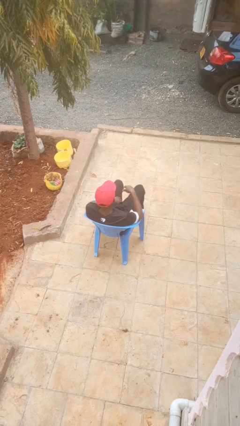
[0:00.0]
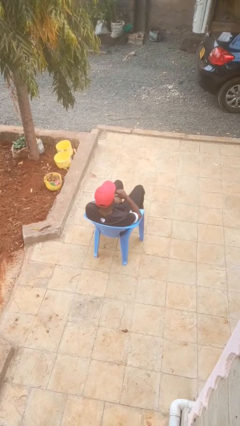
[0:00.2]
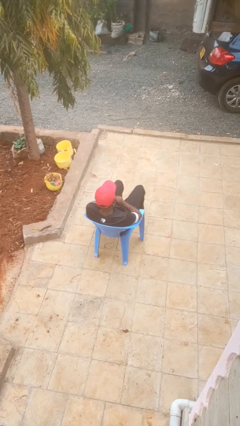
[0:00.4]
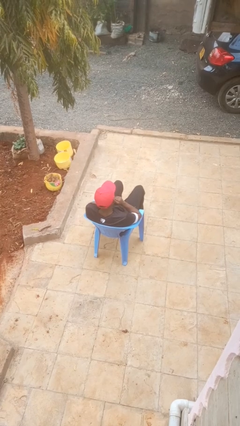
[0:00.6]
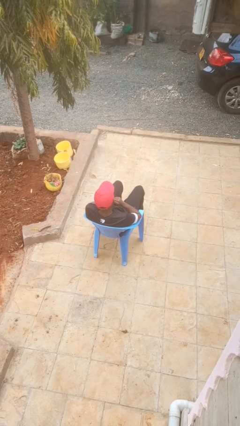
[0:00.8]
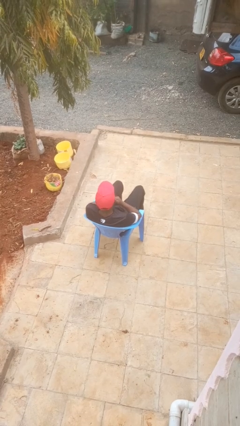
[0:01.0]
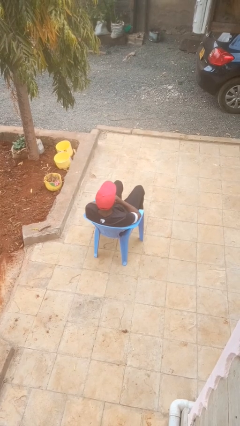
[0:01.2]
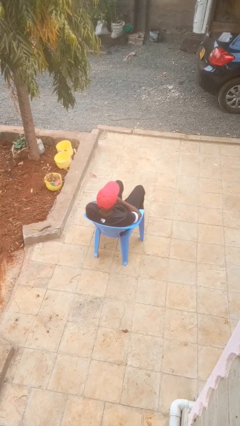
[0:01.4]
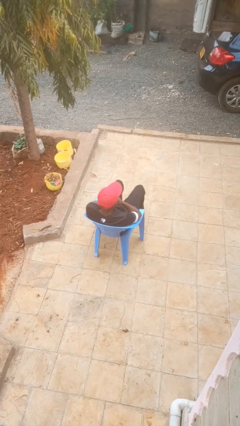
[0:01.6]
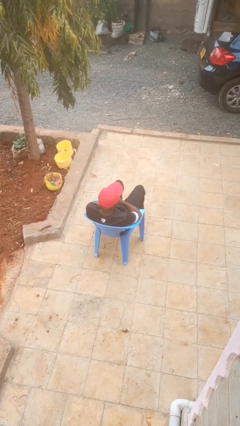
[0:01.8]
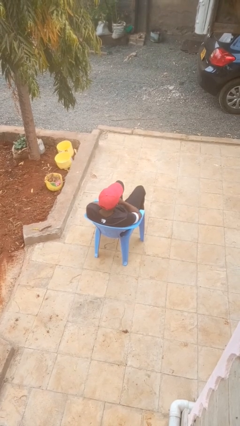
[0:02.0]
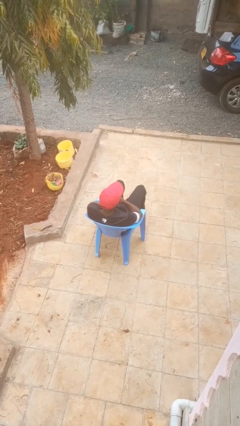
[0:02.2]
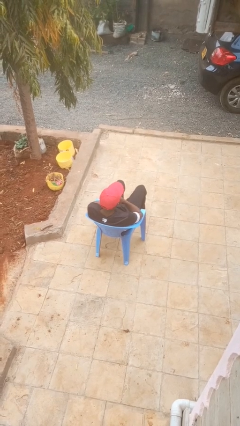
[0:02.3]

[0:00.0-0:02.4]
person strokes chin

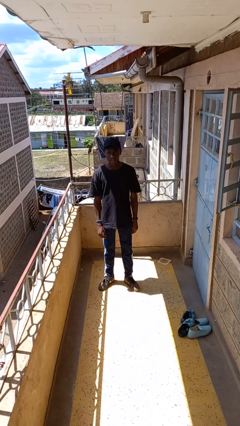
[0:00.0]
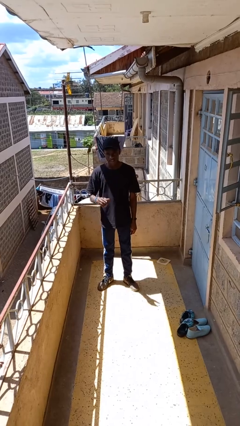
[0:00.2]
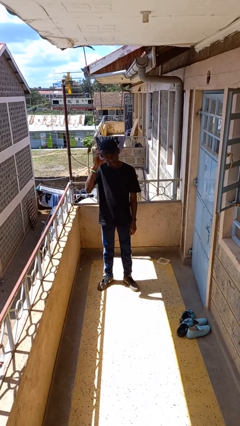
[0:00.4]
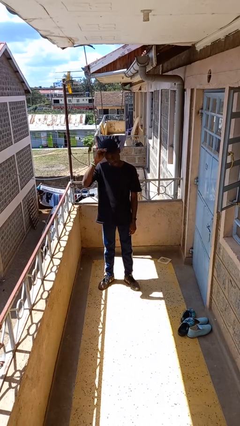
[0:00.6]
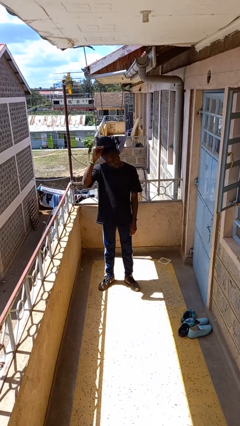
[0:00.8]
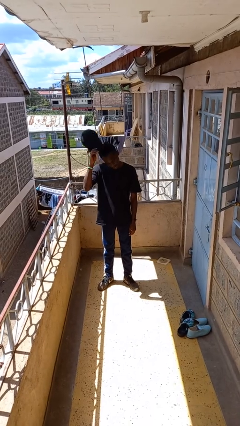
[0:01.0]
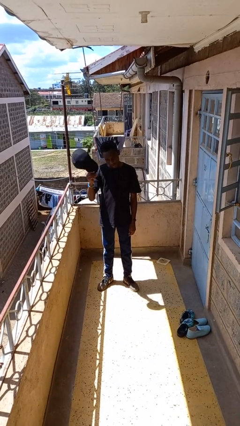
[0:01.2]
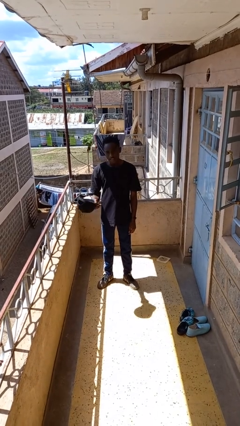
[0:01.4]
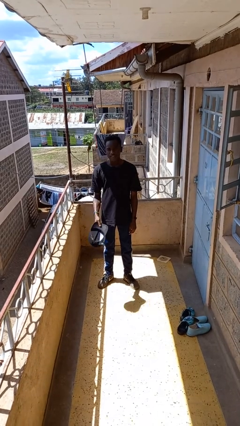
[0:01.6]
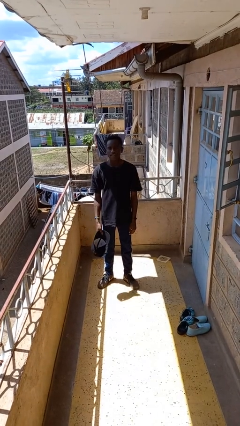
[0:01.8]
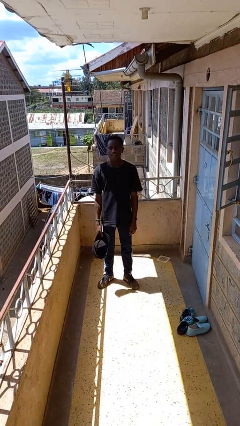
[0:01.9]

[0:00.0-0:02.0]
person takes off hat

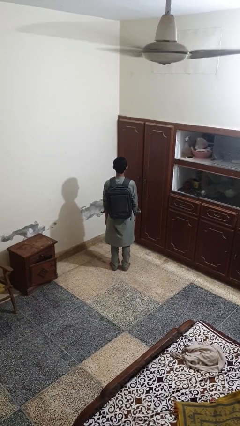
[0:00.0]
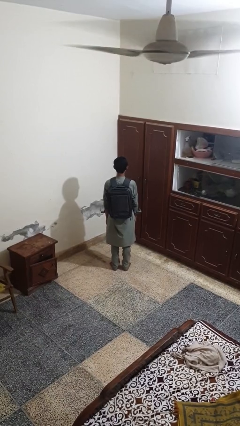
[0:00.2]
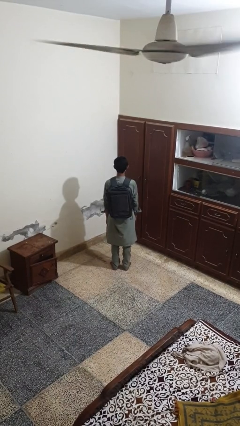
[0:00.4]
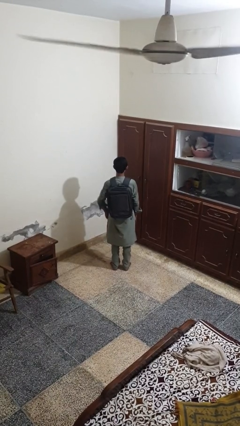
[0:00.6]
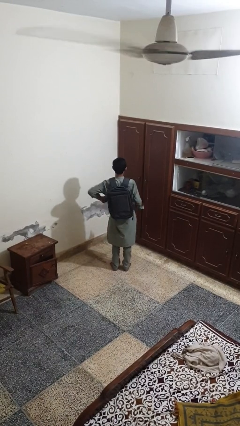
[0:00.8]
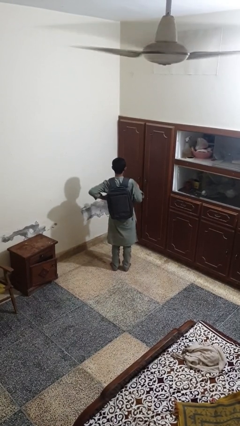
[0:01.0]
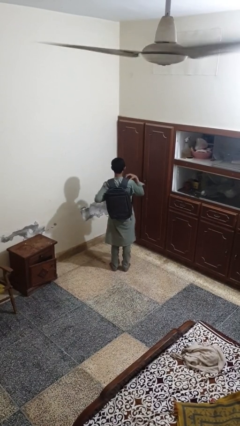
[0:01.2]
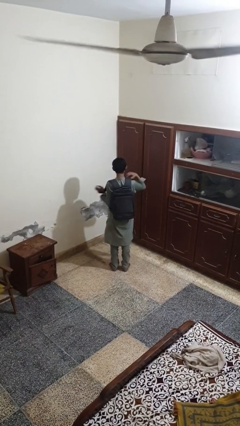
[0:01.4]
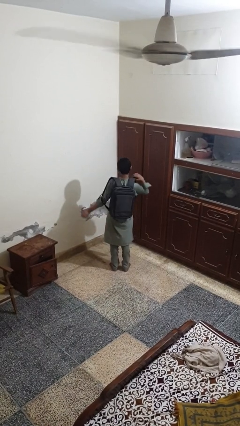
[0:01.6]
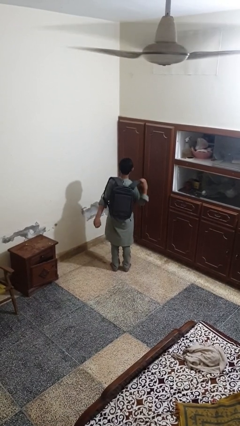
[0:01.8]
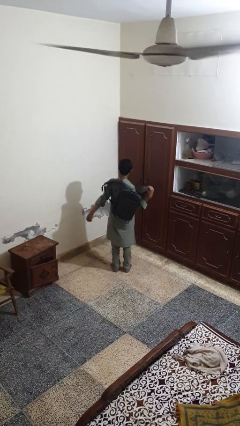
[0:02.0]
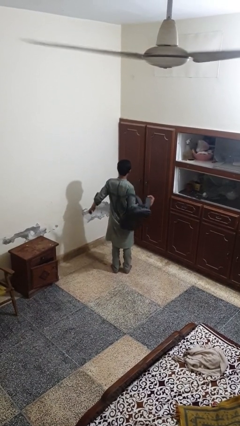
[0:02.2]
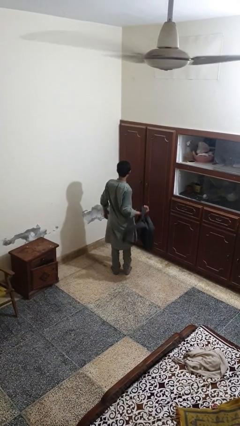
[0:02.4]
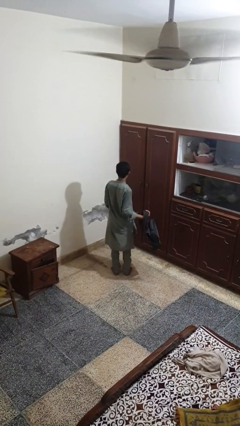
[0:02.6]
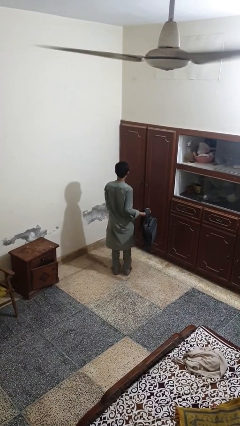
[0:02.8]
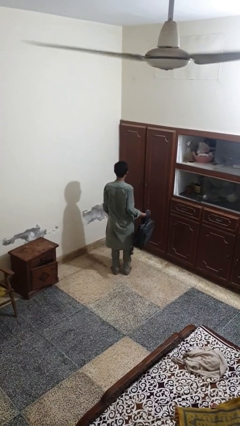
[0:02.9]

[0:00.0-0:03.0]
person takes off backpack

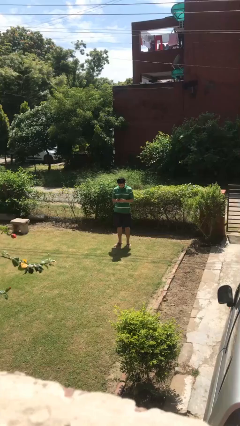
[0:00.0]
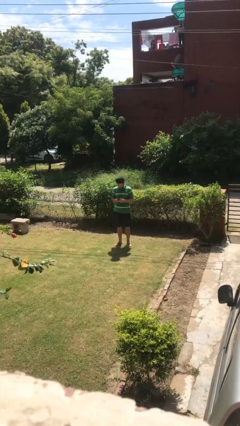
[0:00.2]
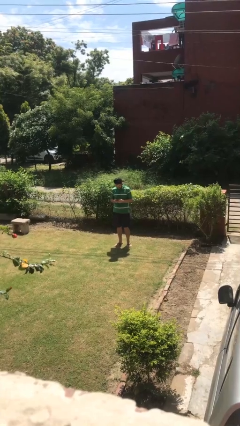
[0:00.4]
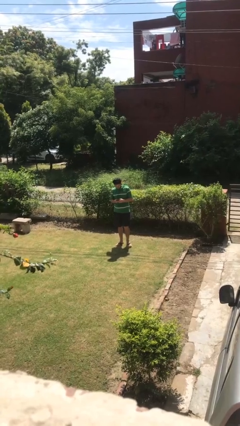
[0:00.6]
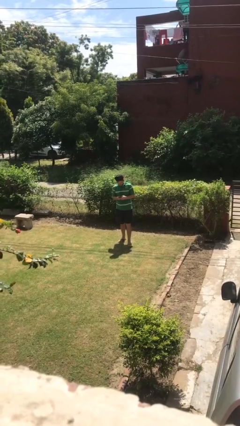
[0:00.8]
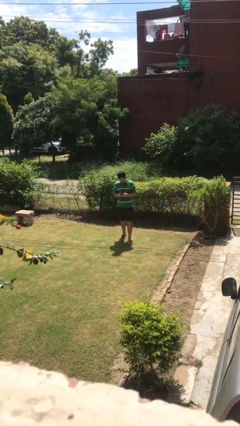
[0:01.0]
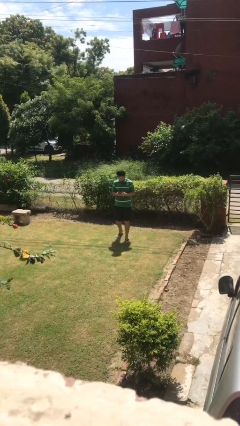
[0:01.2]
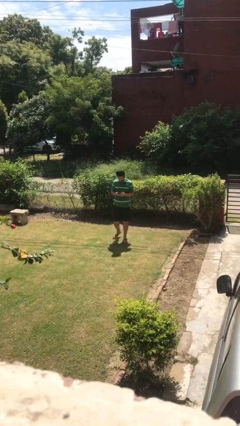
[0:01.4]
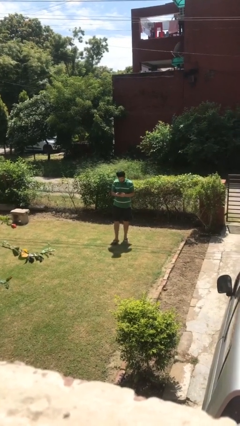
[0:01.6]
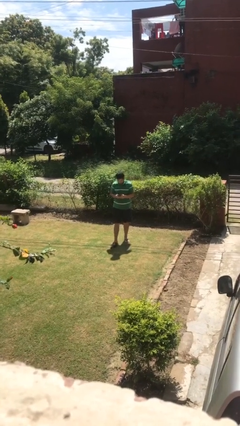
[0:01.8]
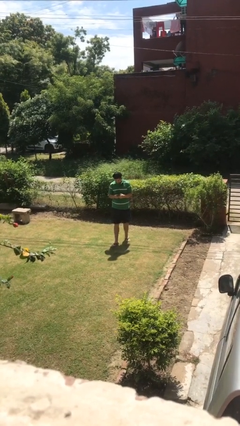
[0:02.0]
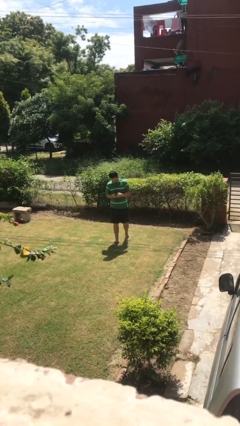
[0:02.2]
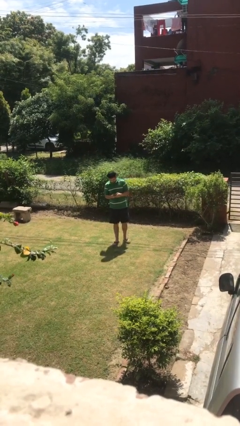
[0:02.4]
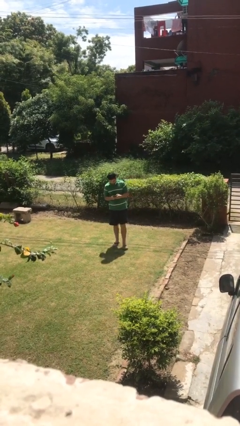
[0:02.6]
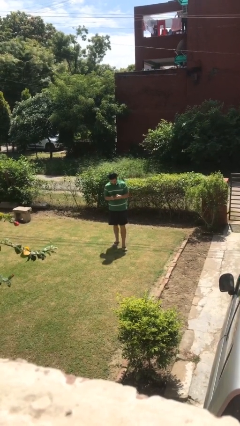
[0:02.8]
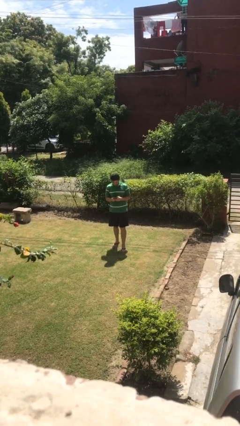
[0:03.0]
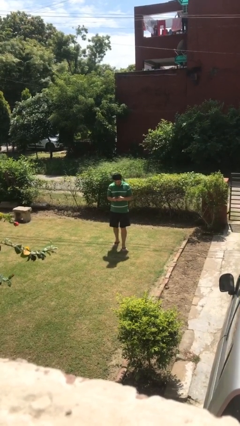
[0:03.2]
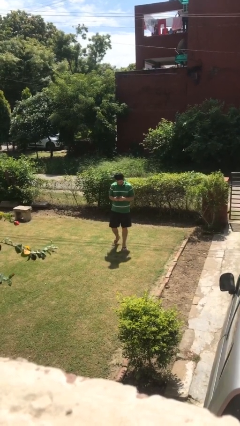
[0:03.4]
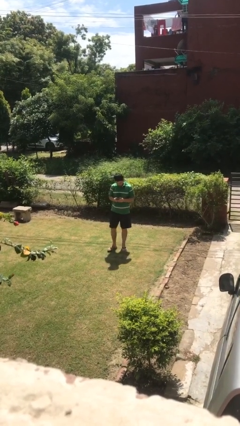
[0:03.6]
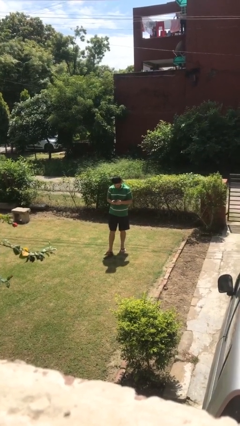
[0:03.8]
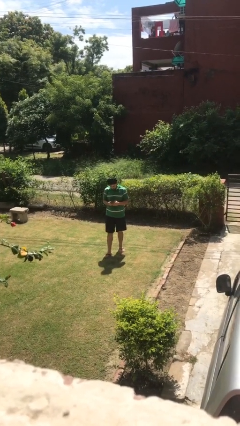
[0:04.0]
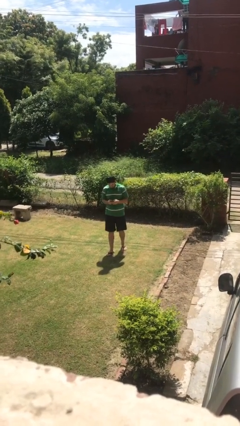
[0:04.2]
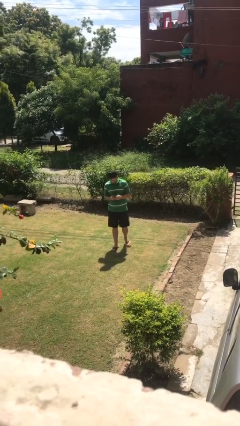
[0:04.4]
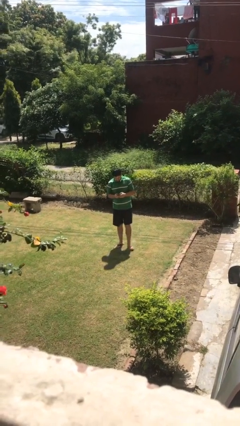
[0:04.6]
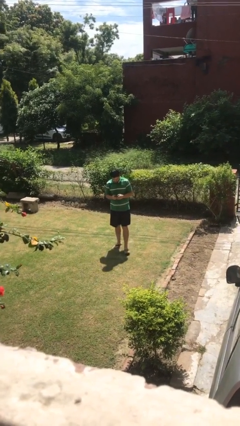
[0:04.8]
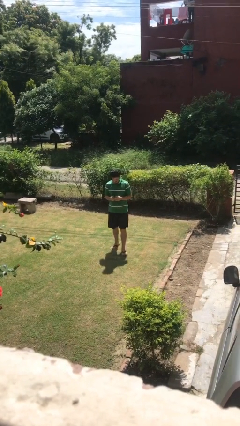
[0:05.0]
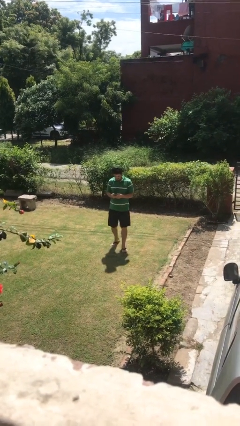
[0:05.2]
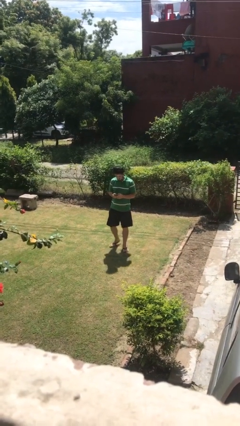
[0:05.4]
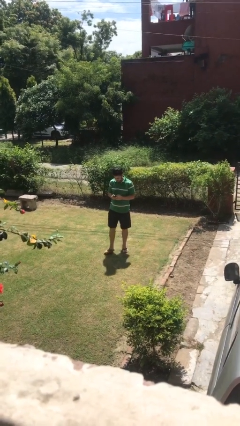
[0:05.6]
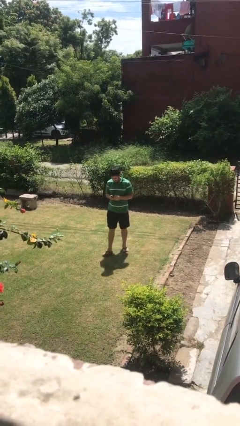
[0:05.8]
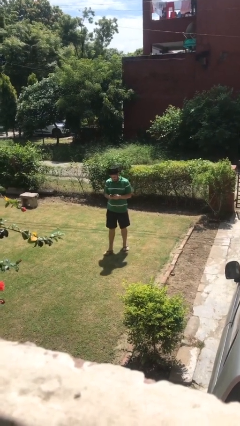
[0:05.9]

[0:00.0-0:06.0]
person texts on phone

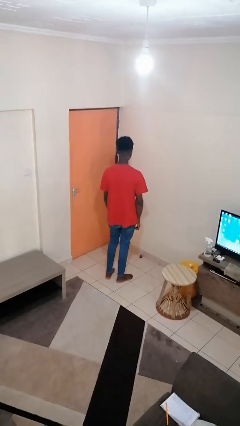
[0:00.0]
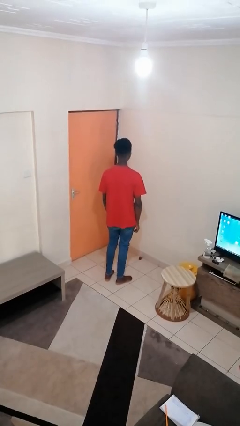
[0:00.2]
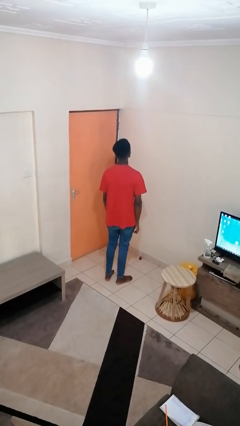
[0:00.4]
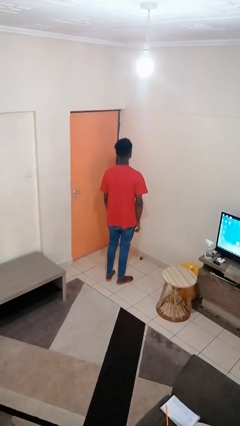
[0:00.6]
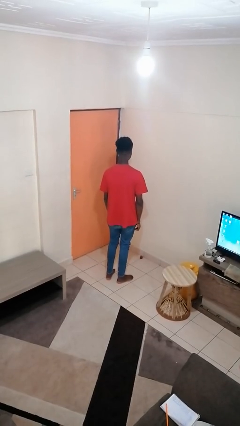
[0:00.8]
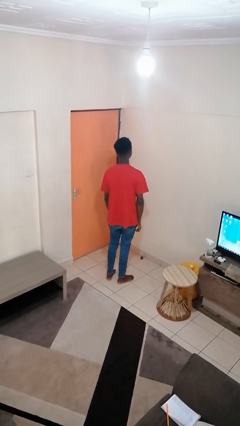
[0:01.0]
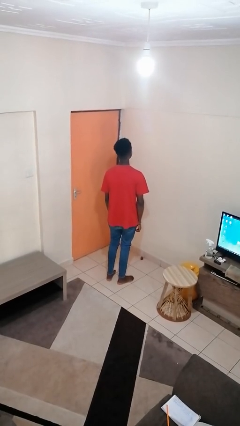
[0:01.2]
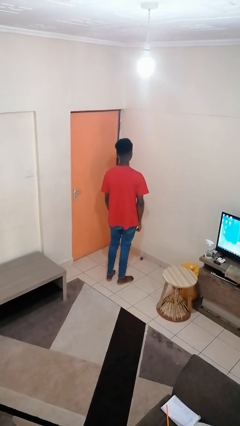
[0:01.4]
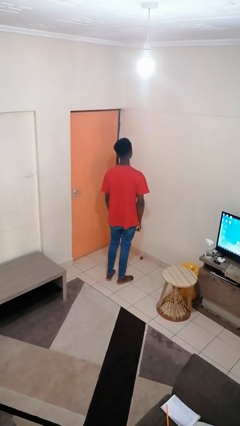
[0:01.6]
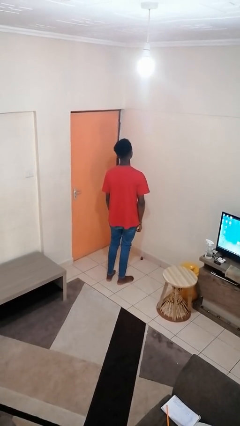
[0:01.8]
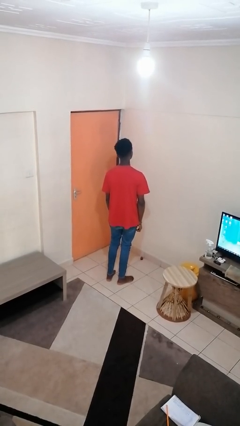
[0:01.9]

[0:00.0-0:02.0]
person nods head

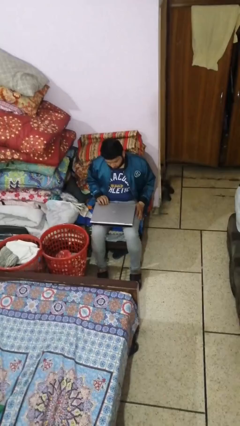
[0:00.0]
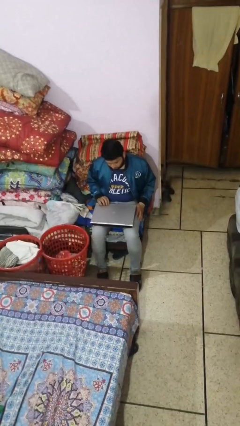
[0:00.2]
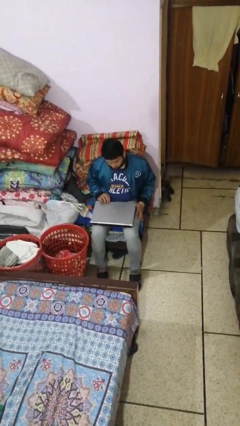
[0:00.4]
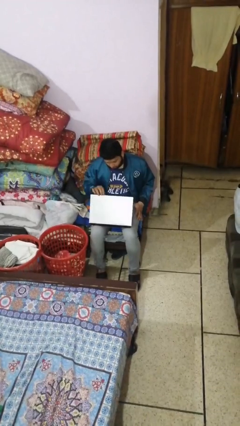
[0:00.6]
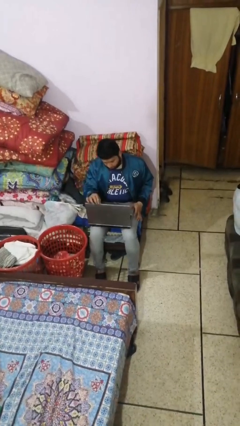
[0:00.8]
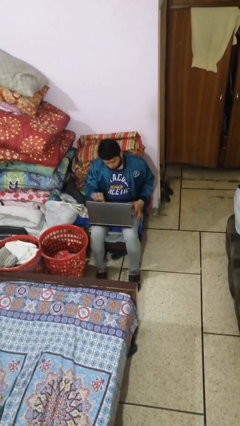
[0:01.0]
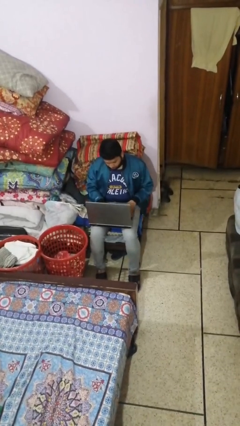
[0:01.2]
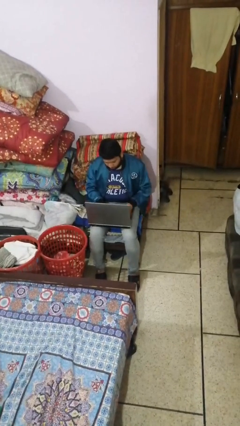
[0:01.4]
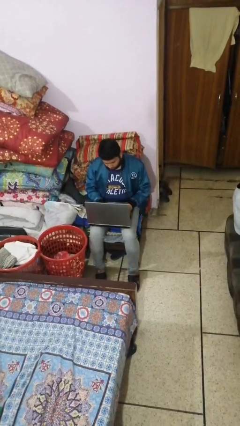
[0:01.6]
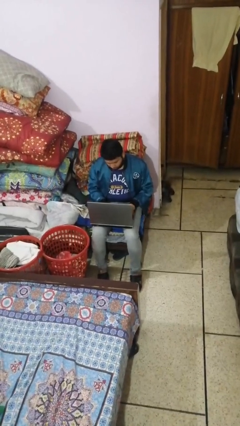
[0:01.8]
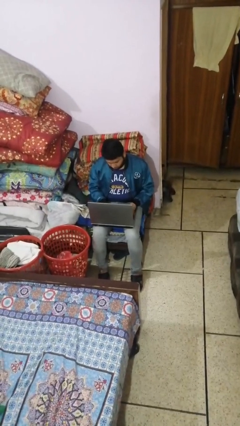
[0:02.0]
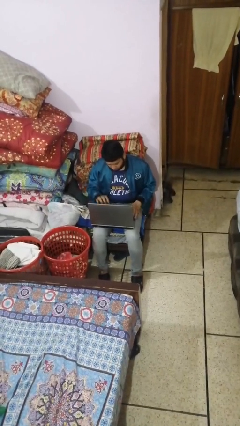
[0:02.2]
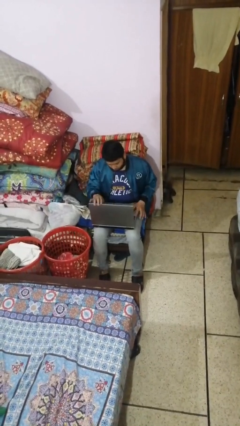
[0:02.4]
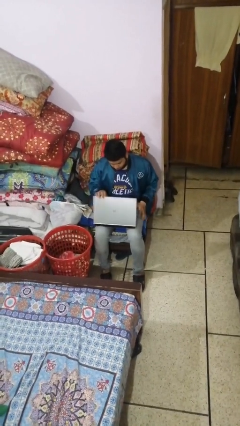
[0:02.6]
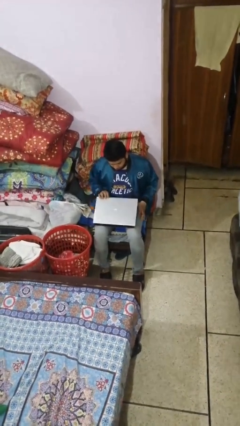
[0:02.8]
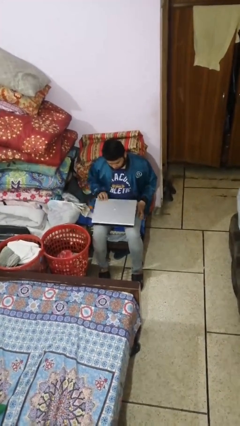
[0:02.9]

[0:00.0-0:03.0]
person interacts with laptop
